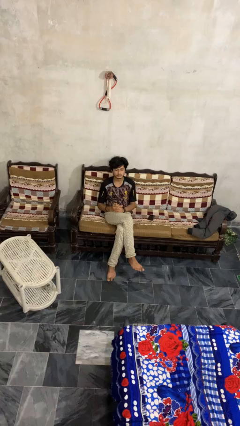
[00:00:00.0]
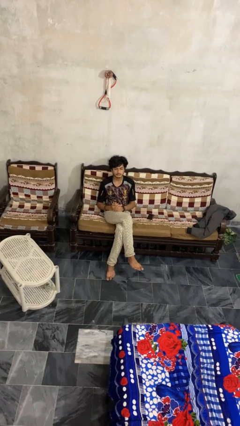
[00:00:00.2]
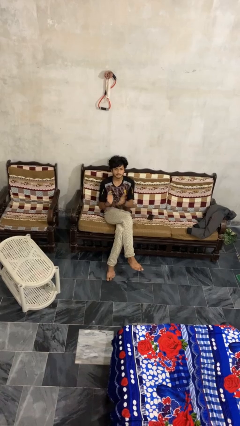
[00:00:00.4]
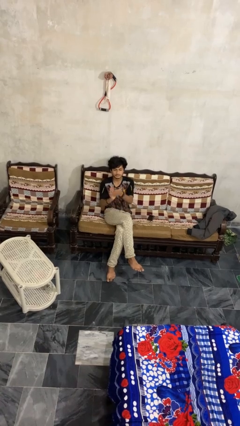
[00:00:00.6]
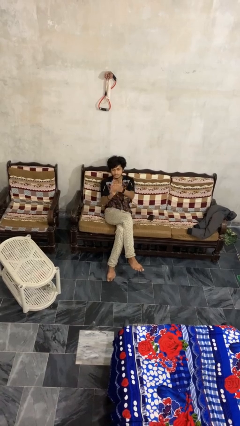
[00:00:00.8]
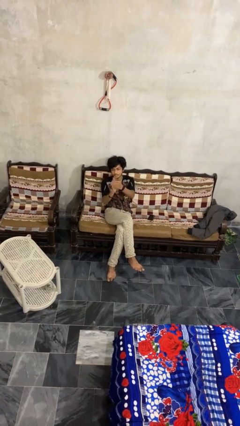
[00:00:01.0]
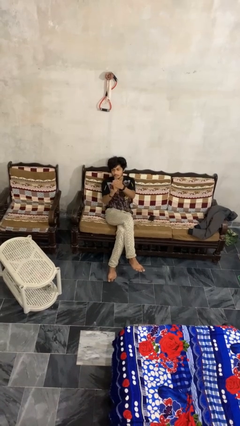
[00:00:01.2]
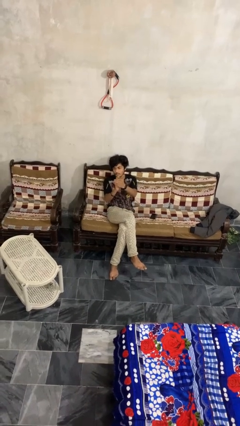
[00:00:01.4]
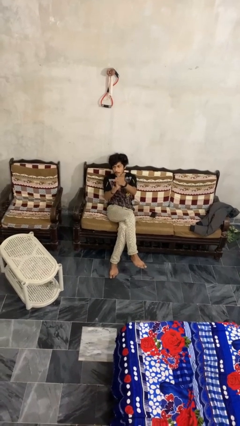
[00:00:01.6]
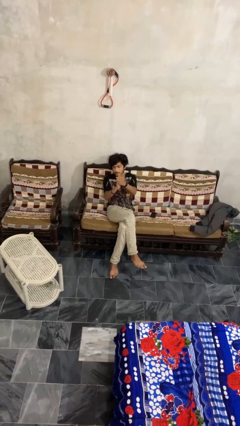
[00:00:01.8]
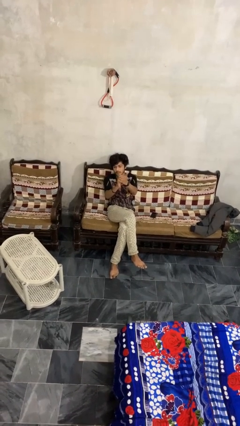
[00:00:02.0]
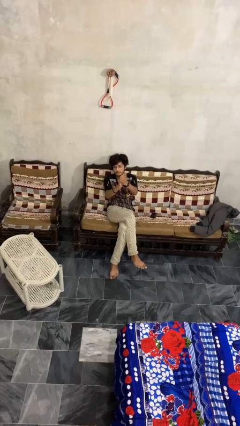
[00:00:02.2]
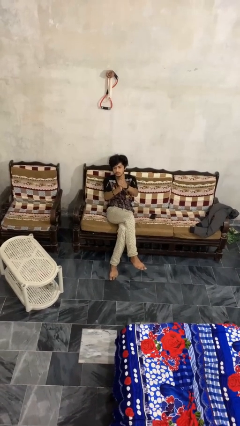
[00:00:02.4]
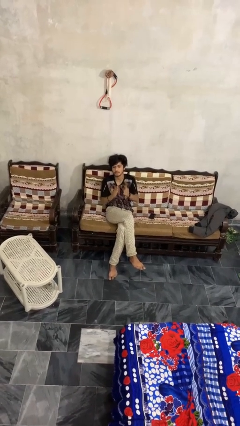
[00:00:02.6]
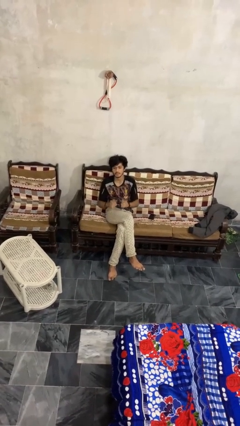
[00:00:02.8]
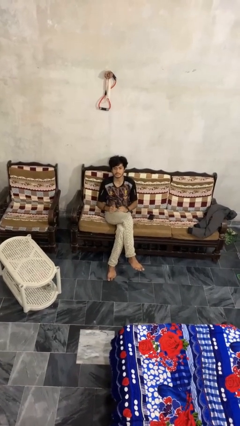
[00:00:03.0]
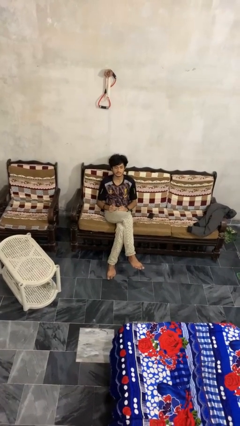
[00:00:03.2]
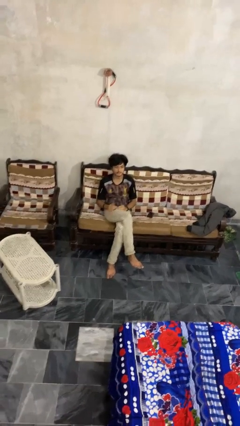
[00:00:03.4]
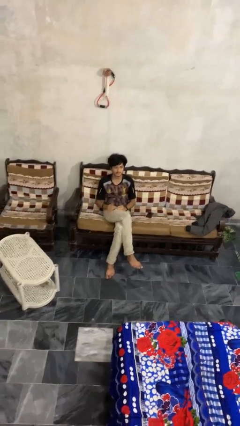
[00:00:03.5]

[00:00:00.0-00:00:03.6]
person claps hands

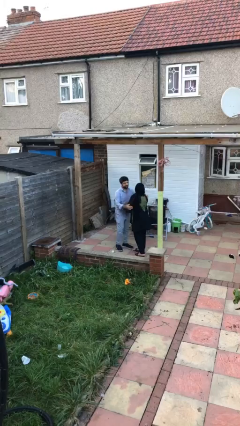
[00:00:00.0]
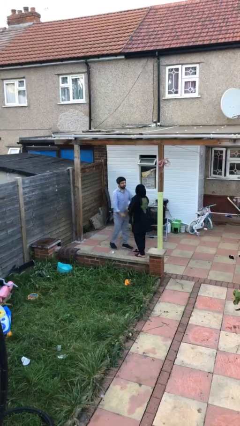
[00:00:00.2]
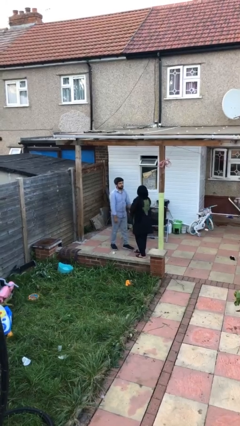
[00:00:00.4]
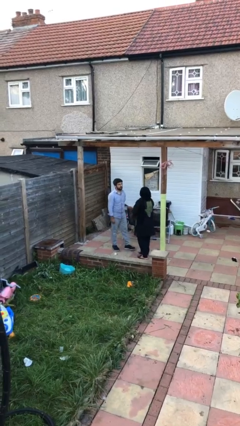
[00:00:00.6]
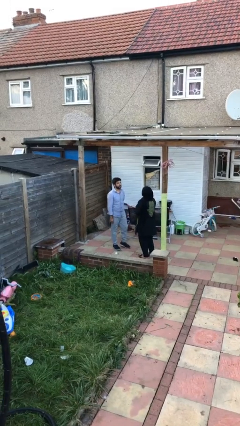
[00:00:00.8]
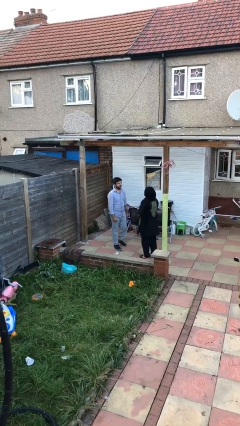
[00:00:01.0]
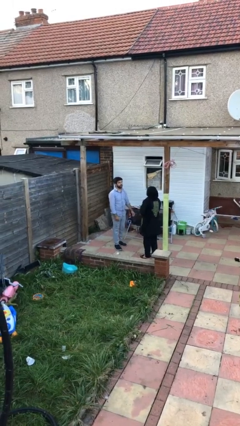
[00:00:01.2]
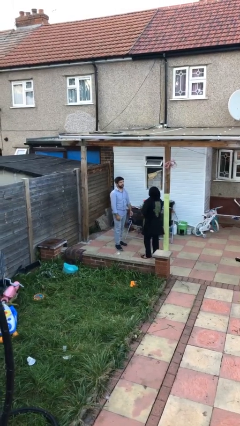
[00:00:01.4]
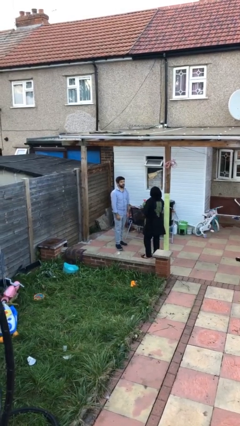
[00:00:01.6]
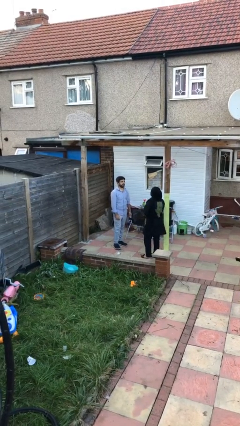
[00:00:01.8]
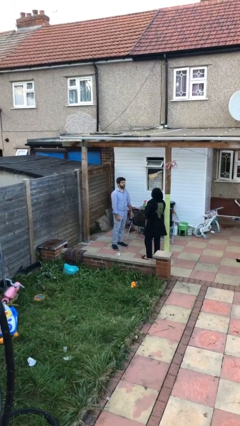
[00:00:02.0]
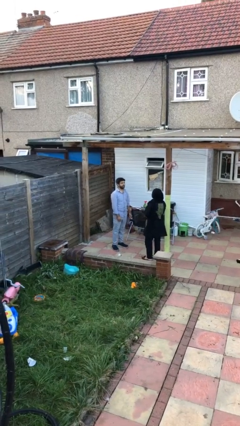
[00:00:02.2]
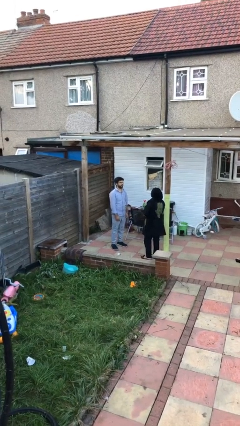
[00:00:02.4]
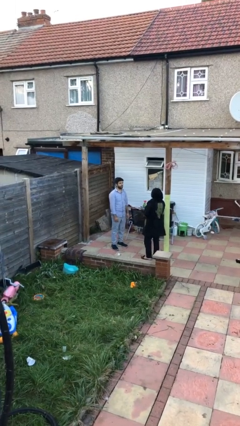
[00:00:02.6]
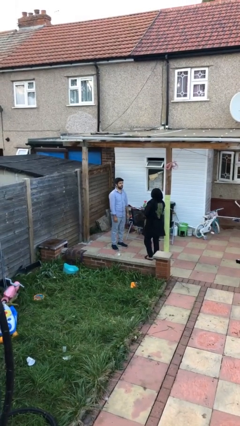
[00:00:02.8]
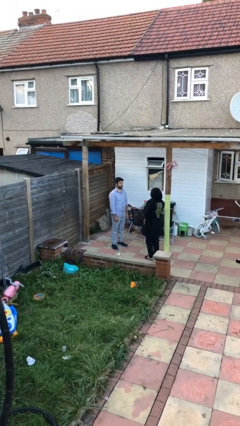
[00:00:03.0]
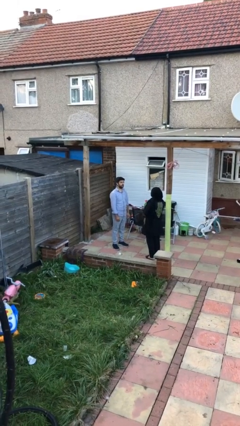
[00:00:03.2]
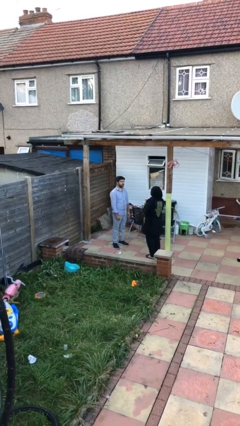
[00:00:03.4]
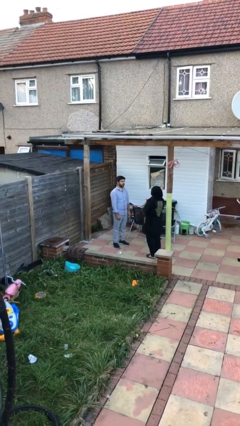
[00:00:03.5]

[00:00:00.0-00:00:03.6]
person talks to person

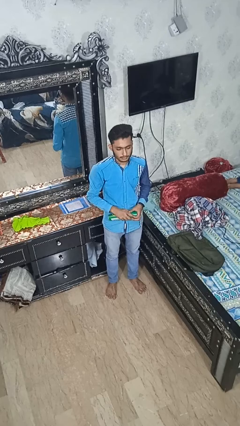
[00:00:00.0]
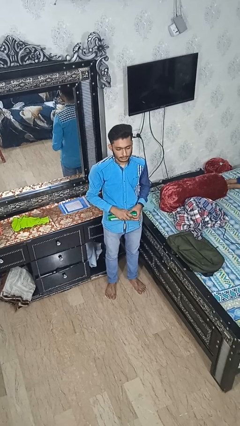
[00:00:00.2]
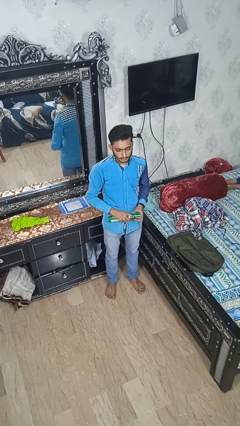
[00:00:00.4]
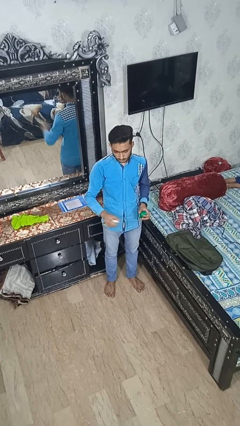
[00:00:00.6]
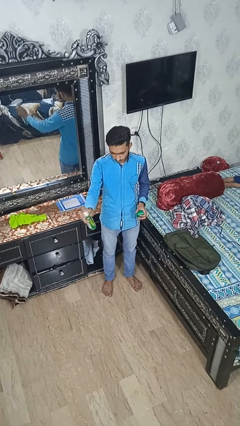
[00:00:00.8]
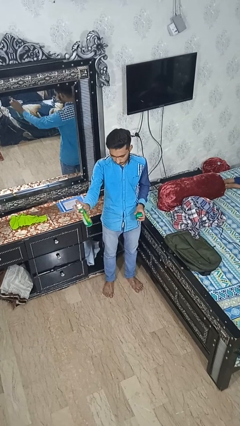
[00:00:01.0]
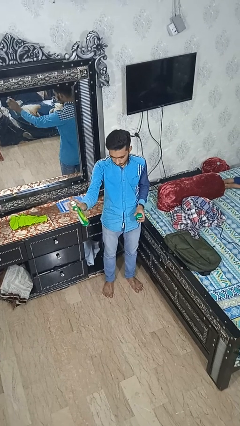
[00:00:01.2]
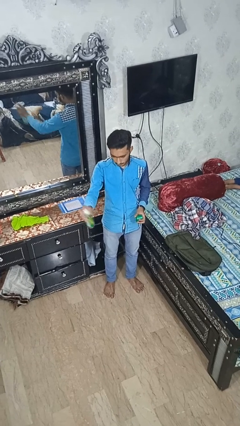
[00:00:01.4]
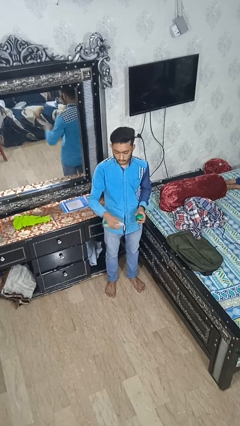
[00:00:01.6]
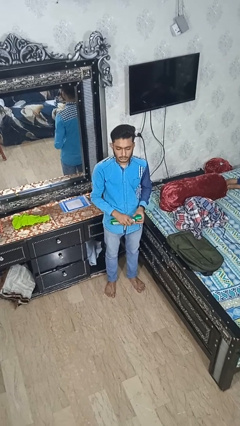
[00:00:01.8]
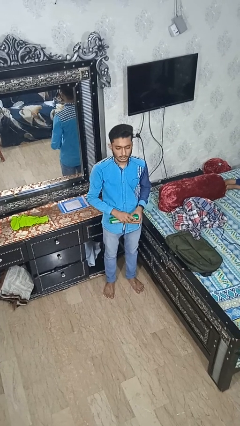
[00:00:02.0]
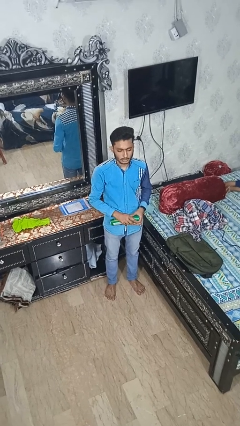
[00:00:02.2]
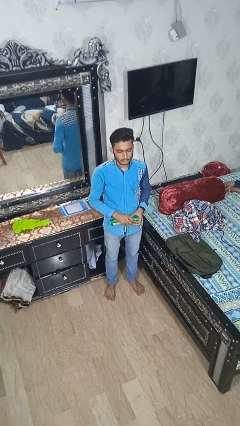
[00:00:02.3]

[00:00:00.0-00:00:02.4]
person sprays from bottle

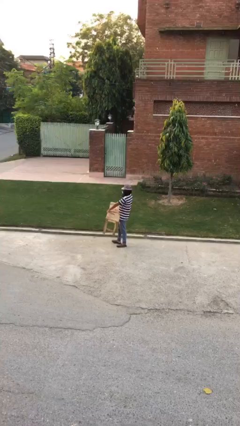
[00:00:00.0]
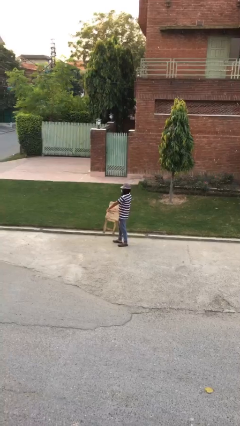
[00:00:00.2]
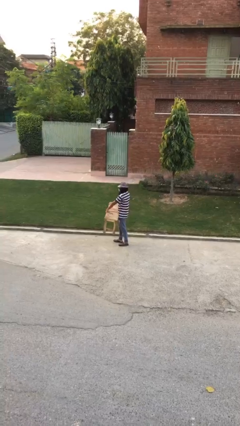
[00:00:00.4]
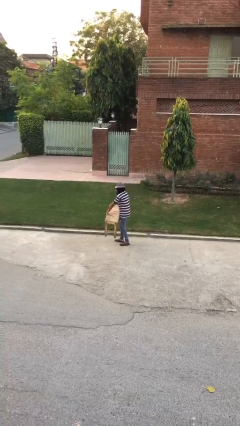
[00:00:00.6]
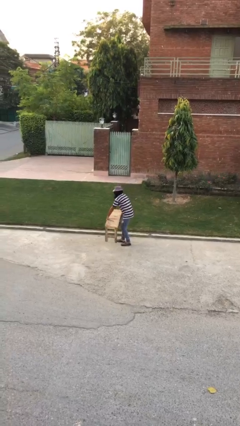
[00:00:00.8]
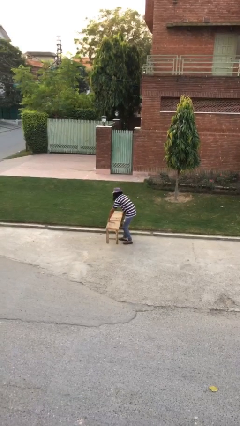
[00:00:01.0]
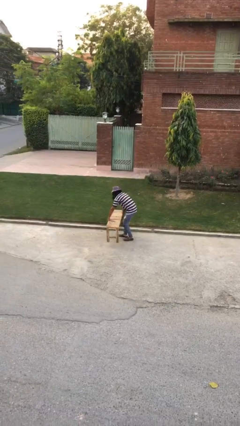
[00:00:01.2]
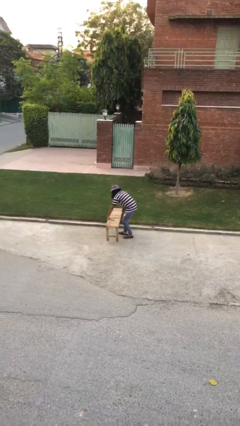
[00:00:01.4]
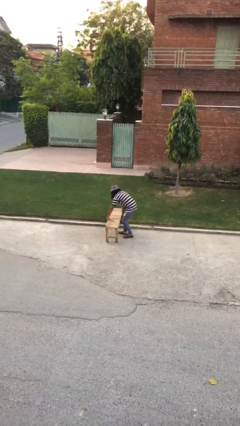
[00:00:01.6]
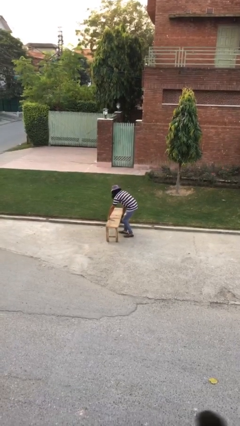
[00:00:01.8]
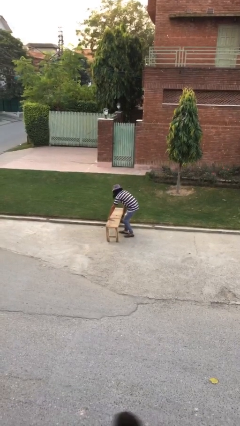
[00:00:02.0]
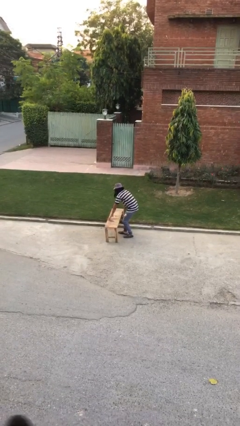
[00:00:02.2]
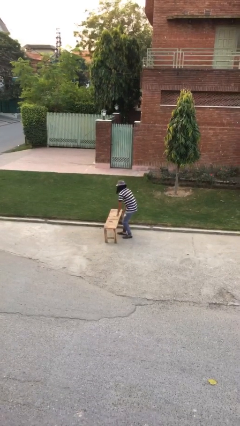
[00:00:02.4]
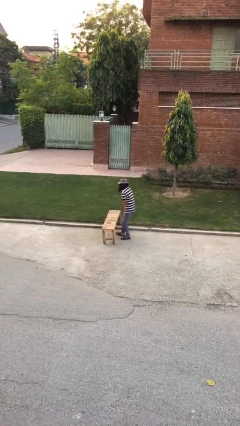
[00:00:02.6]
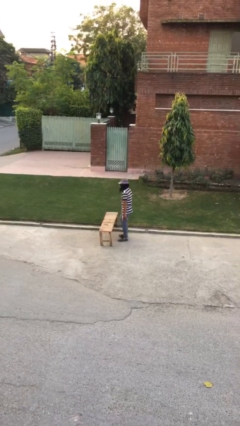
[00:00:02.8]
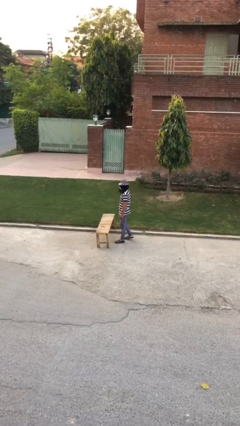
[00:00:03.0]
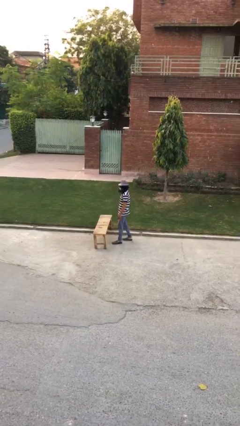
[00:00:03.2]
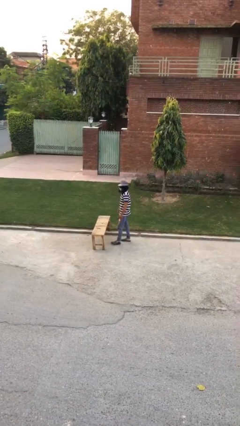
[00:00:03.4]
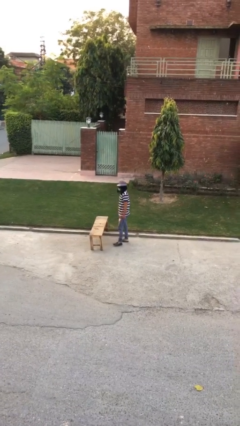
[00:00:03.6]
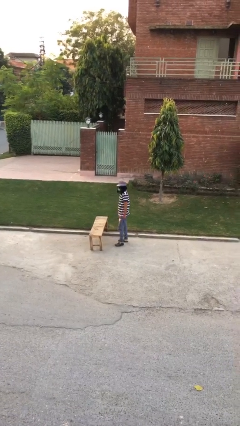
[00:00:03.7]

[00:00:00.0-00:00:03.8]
person puts down object on floor

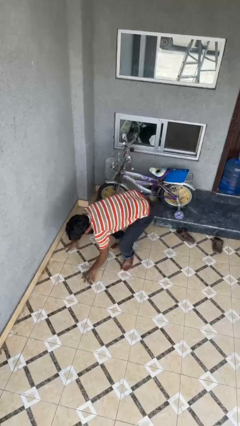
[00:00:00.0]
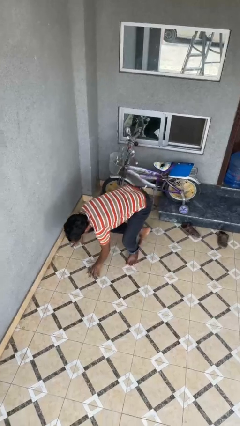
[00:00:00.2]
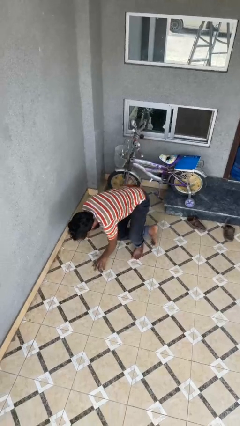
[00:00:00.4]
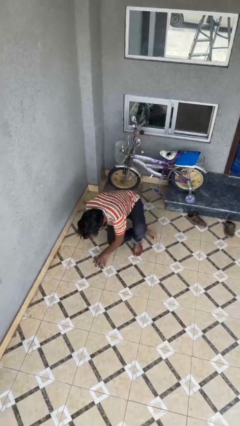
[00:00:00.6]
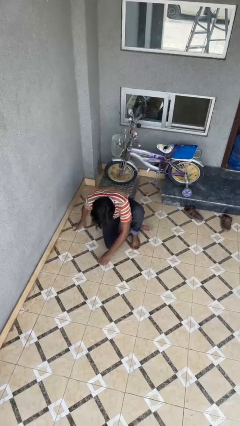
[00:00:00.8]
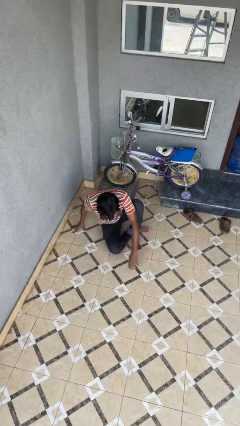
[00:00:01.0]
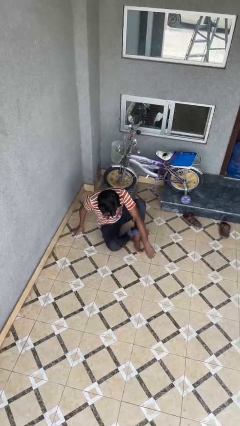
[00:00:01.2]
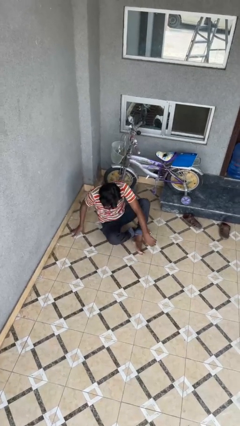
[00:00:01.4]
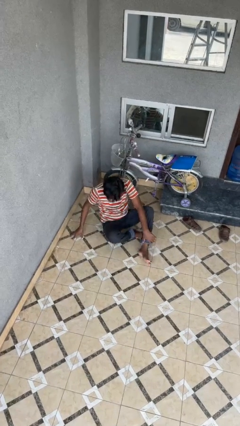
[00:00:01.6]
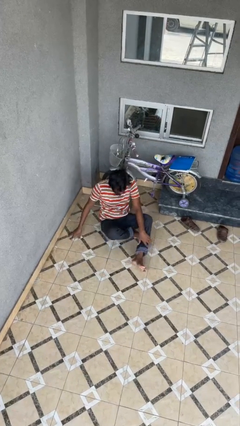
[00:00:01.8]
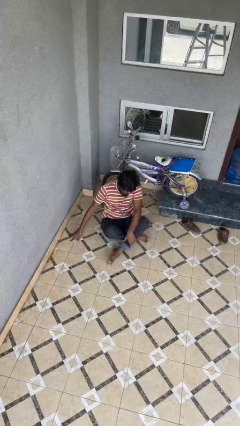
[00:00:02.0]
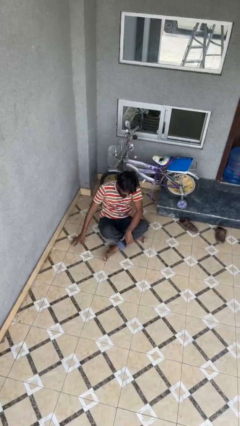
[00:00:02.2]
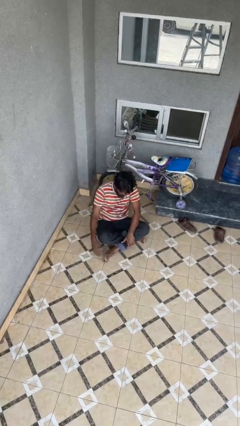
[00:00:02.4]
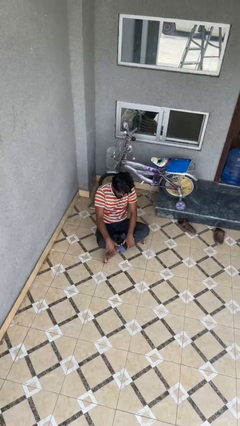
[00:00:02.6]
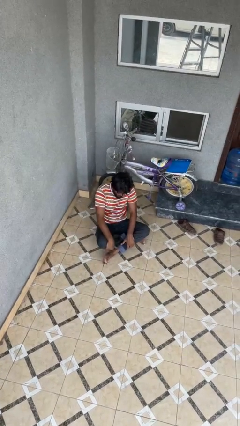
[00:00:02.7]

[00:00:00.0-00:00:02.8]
person sits crisscross

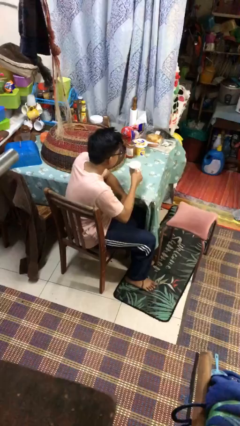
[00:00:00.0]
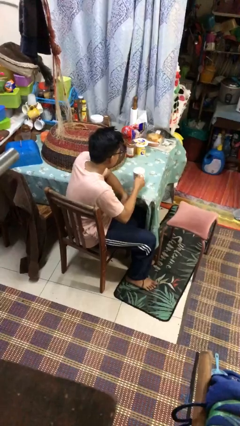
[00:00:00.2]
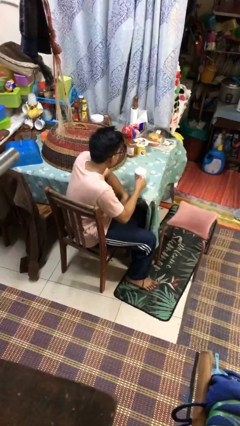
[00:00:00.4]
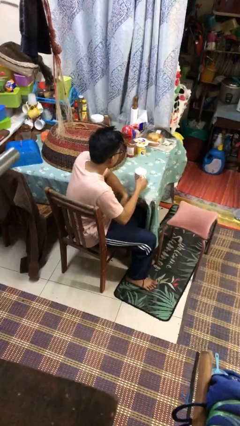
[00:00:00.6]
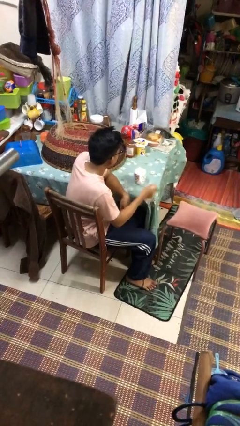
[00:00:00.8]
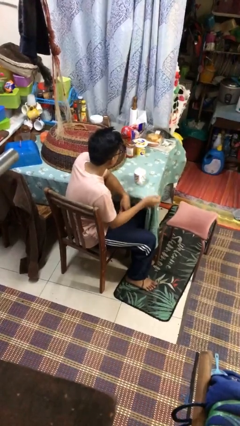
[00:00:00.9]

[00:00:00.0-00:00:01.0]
person puts down object on table
